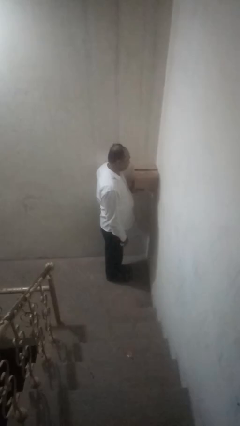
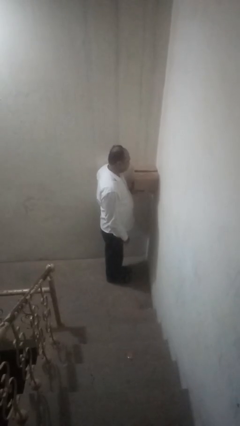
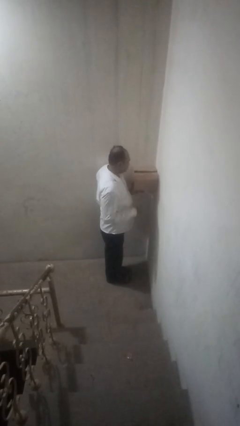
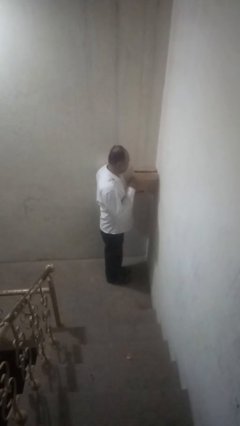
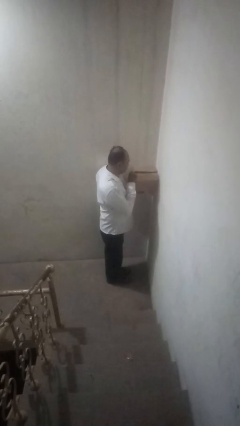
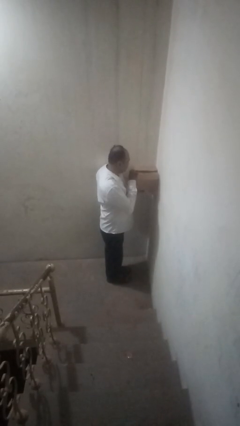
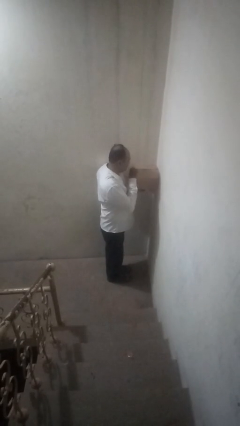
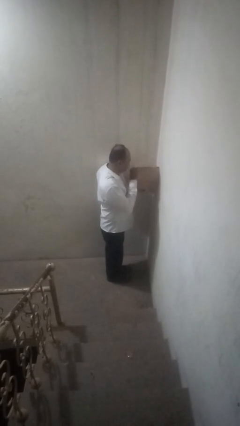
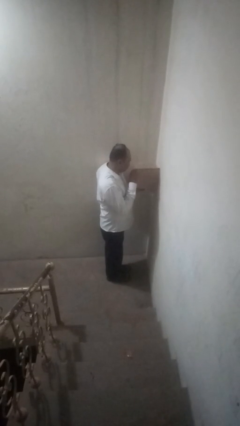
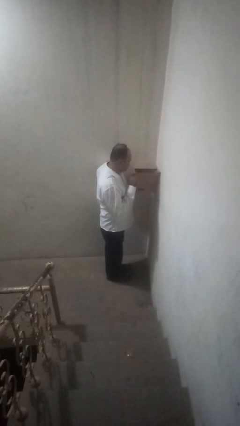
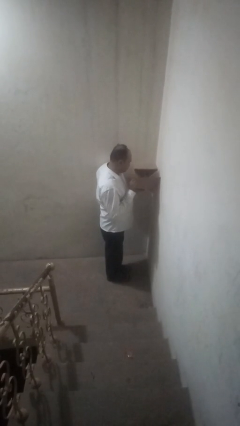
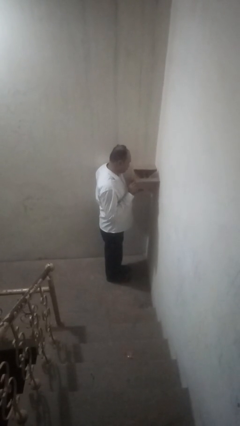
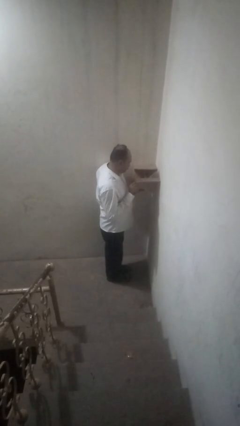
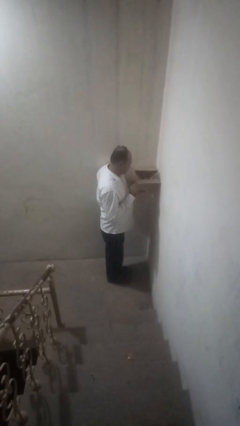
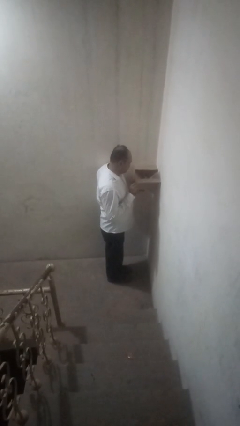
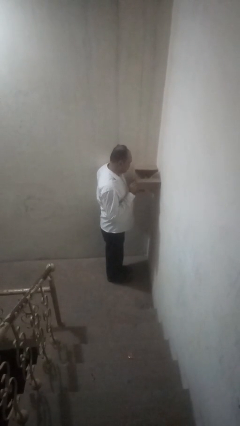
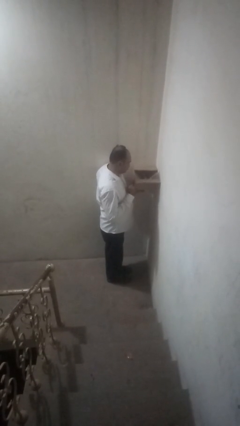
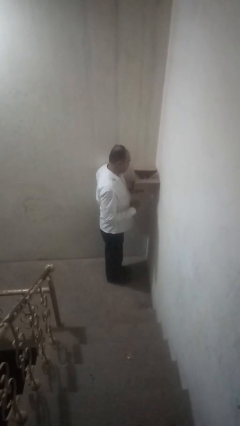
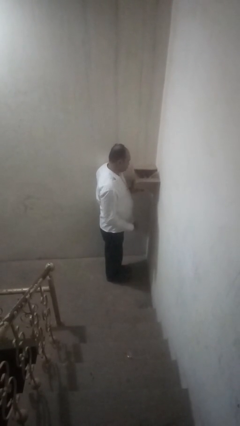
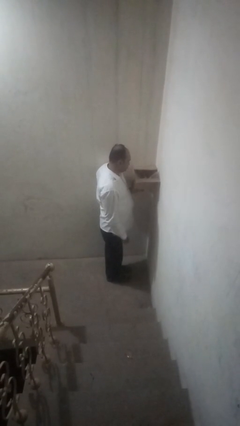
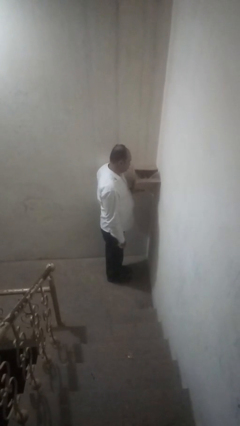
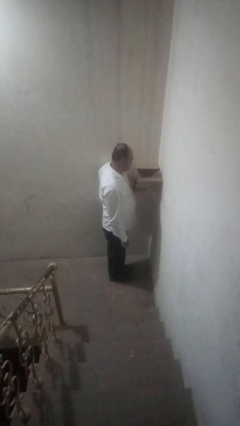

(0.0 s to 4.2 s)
person opens mailbox

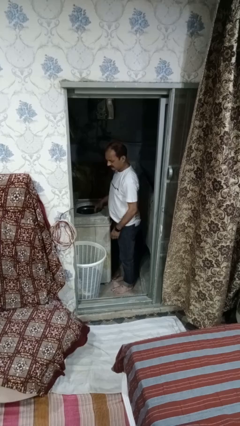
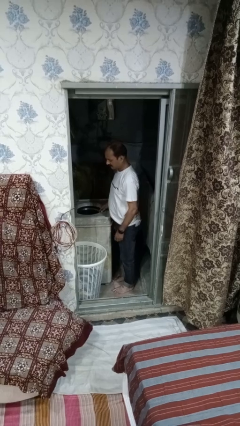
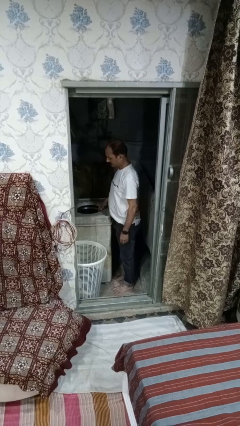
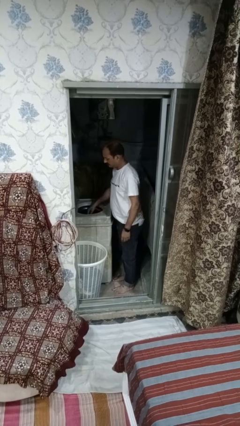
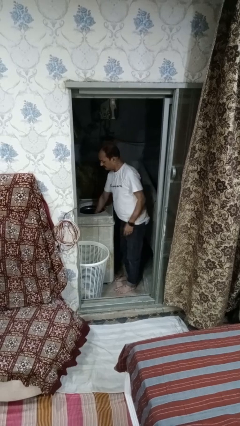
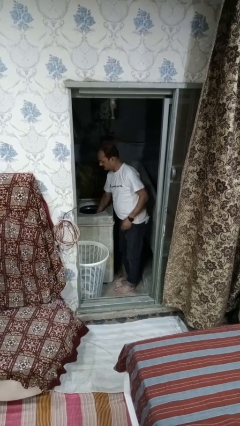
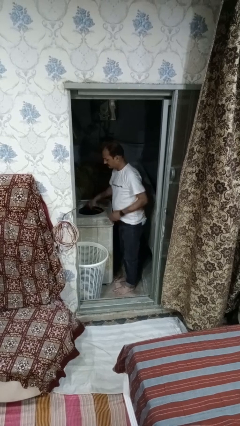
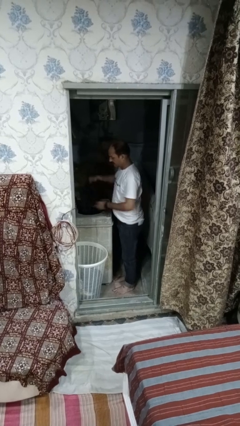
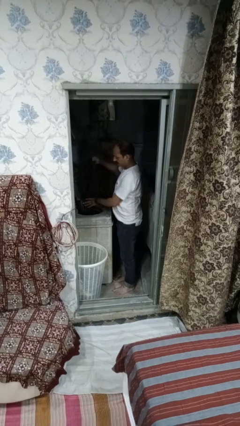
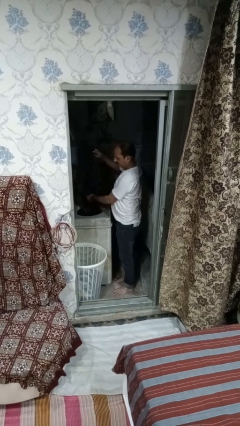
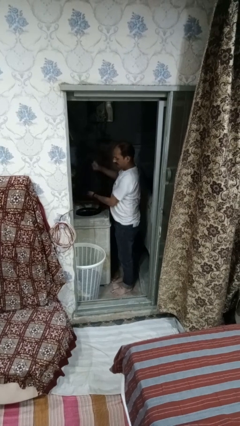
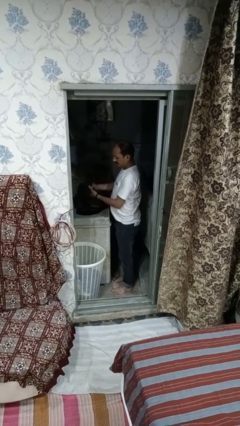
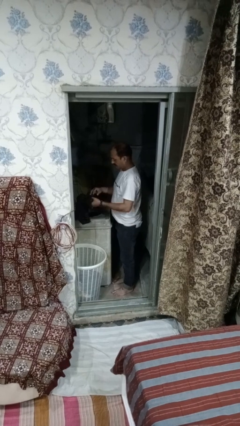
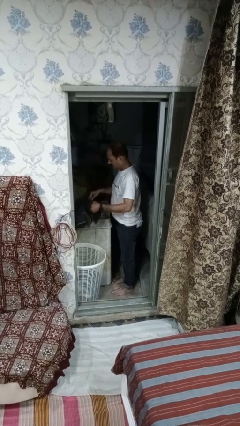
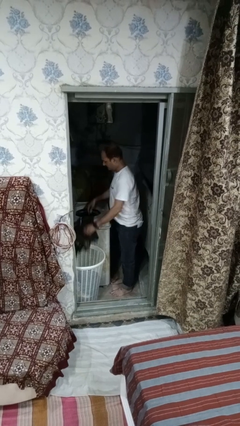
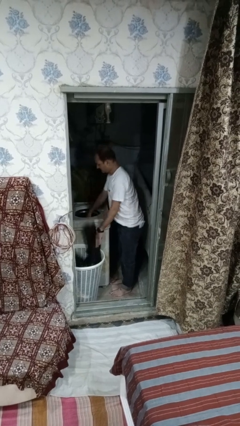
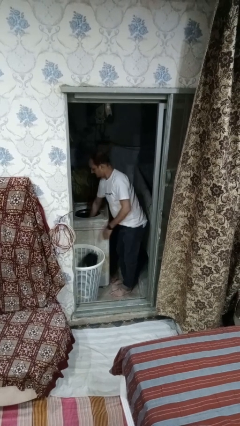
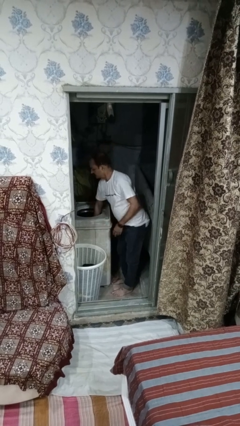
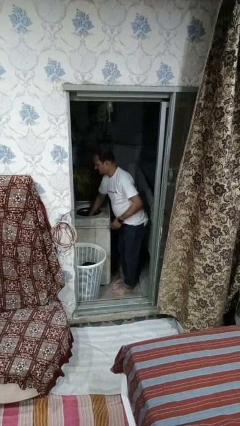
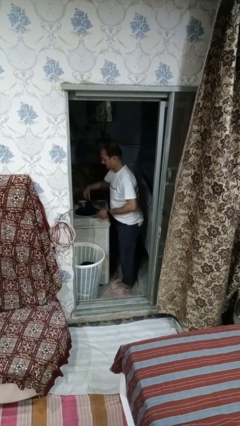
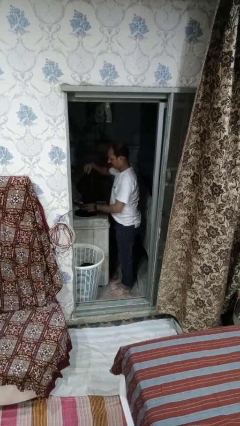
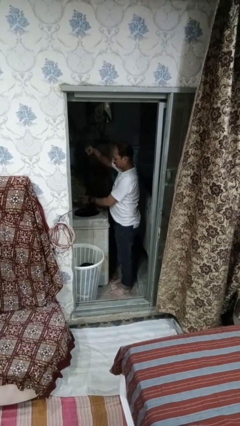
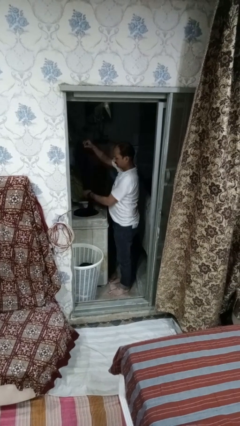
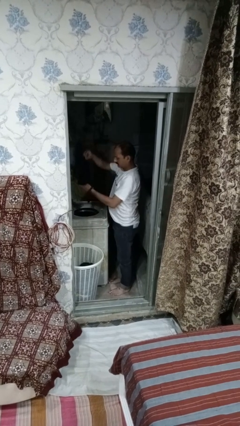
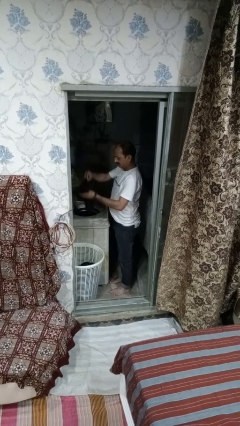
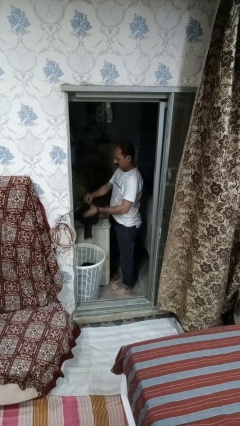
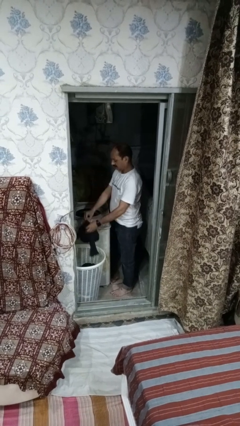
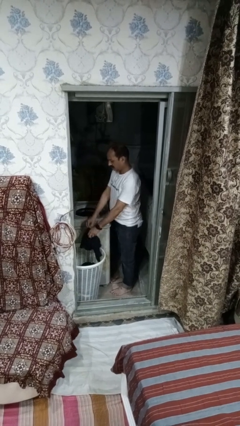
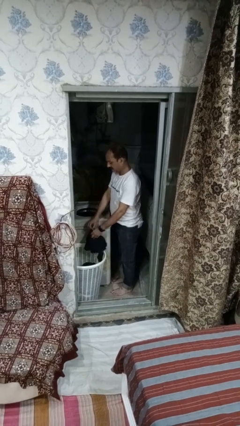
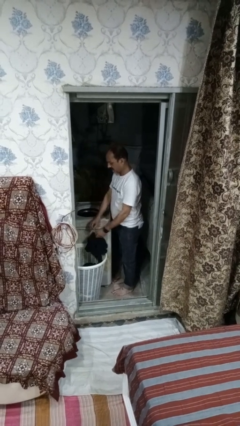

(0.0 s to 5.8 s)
person unloads dryer

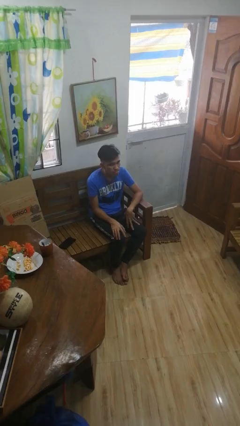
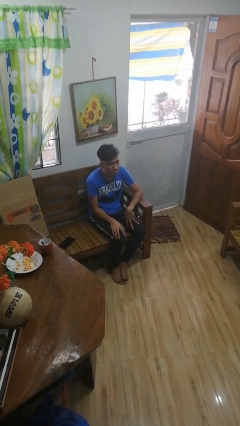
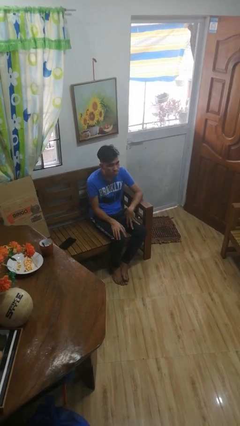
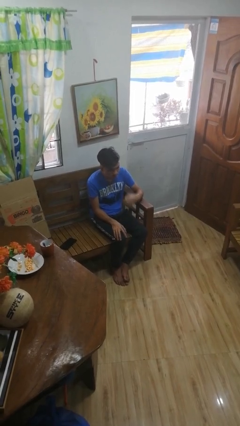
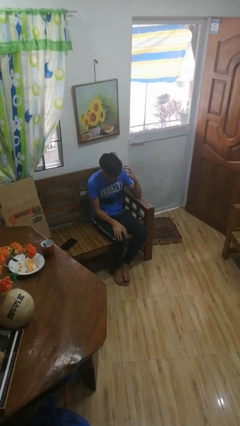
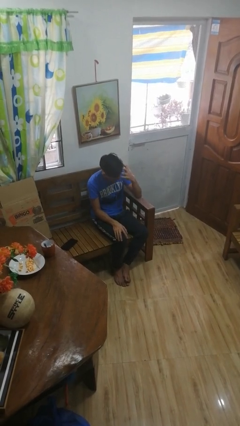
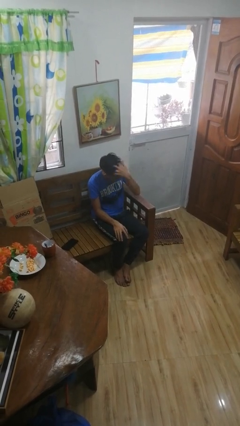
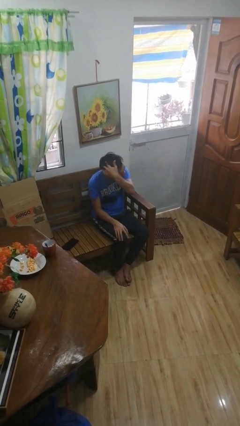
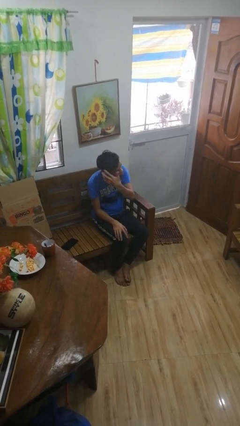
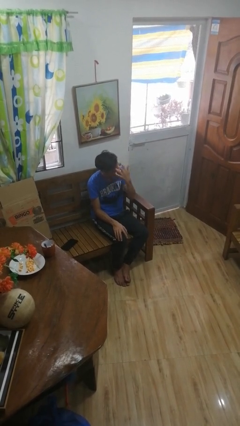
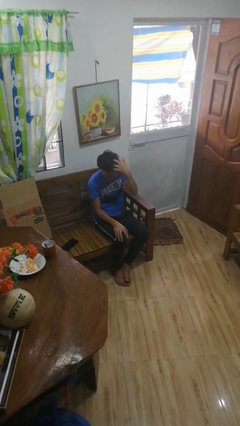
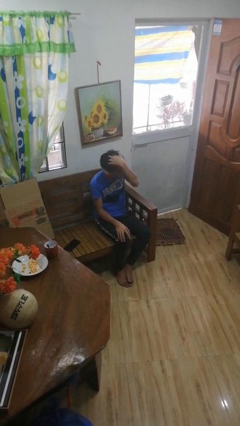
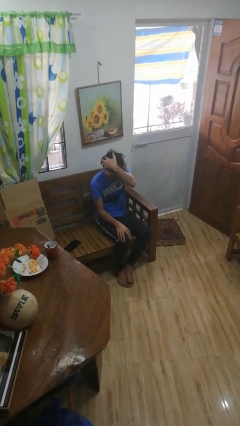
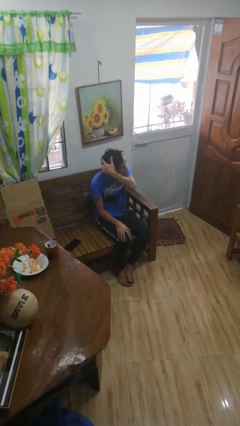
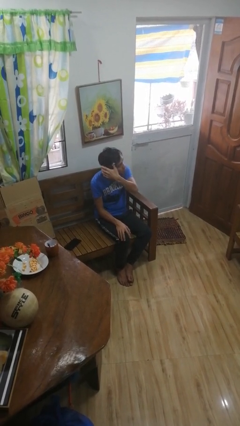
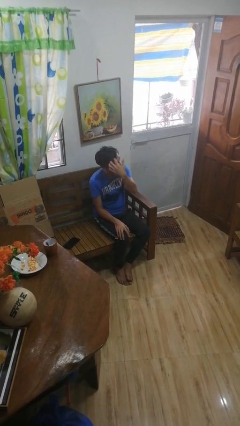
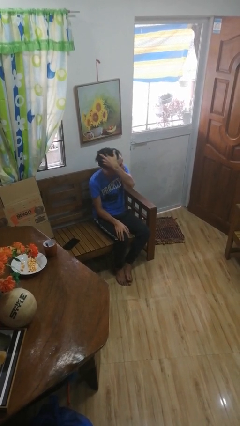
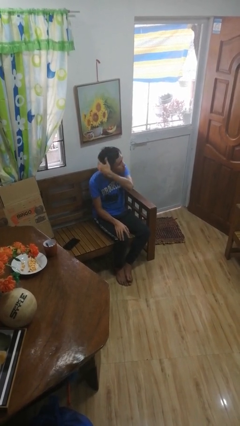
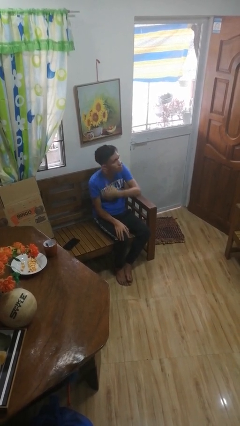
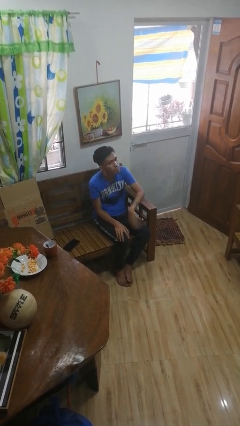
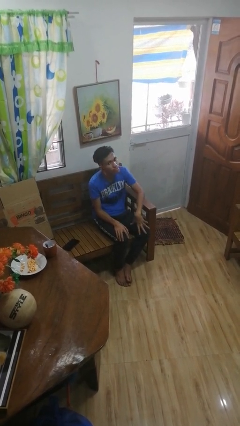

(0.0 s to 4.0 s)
person strokes hair

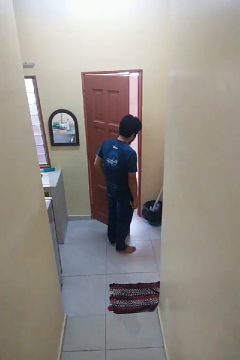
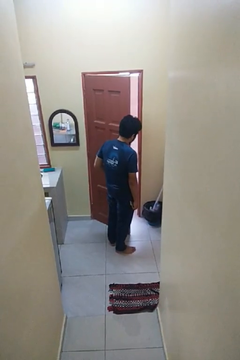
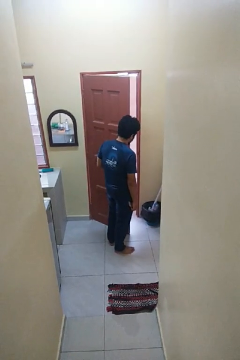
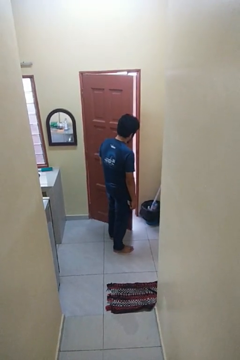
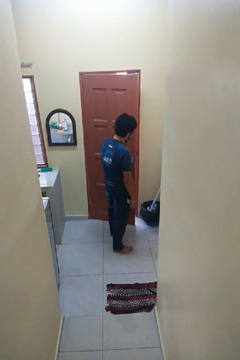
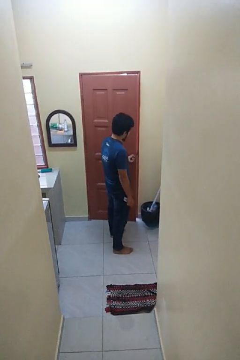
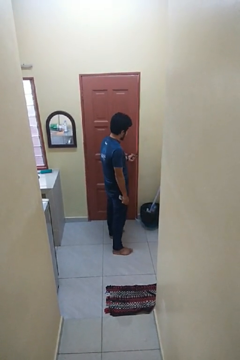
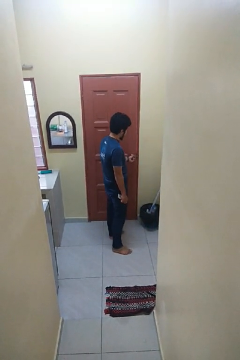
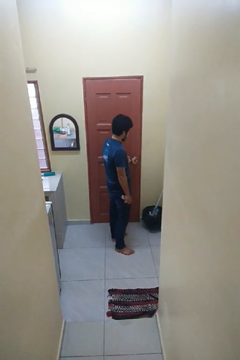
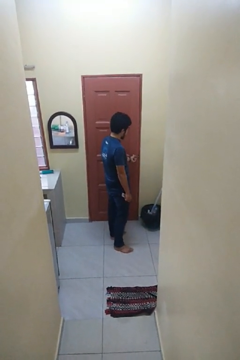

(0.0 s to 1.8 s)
person closes facility door

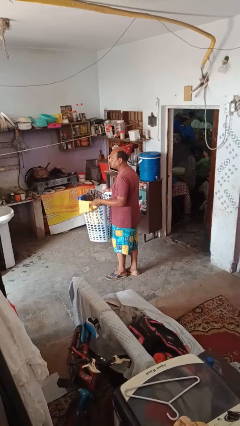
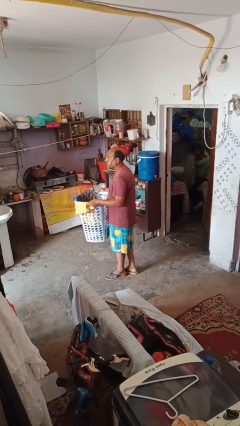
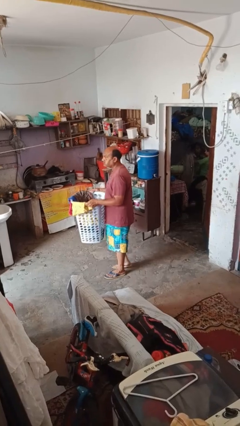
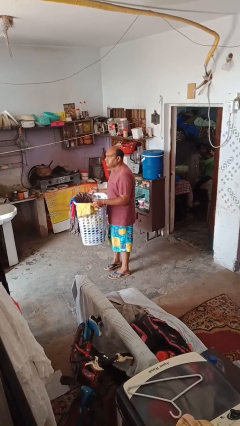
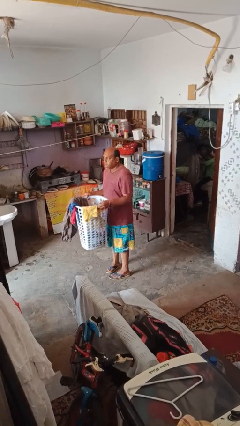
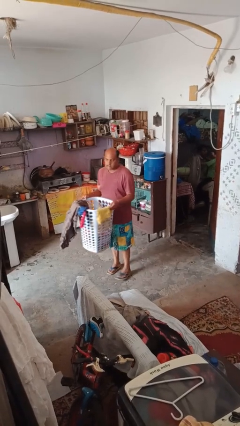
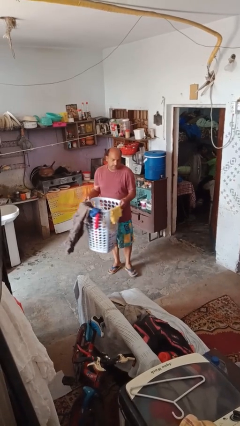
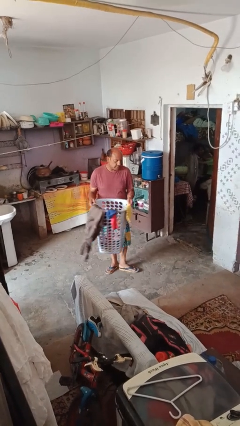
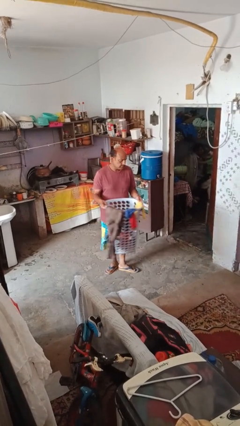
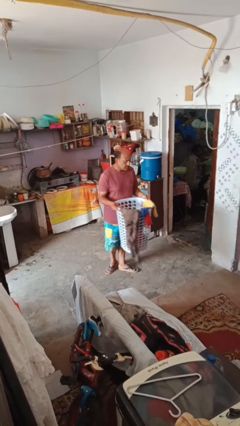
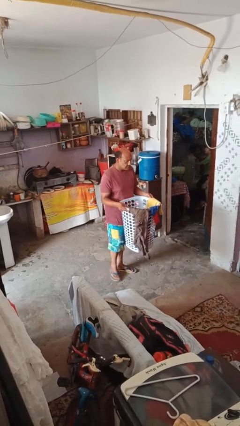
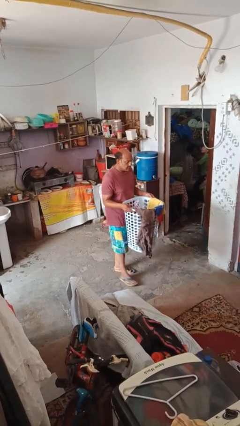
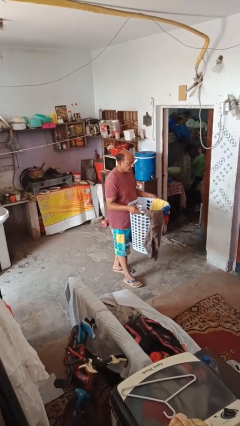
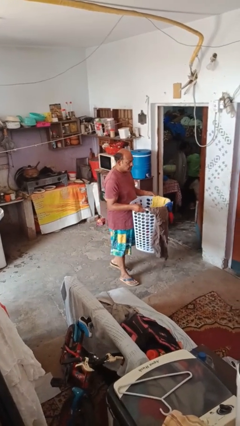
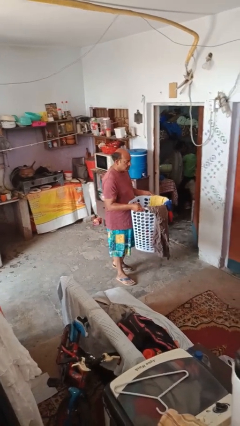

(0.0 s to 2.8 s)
person carries laundry basket
